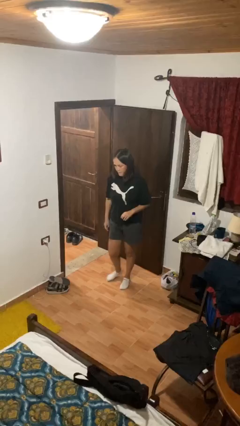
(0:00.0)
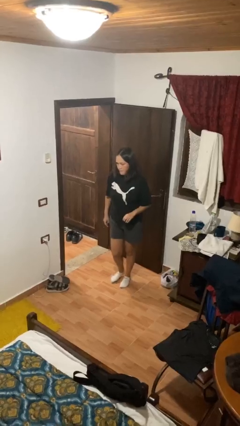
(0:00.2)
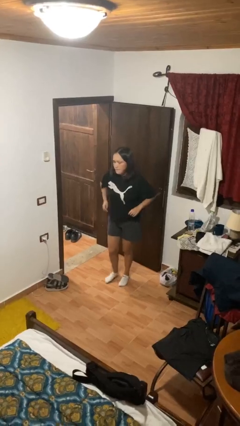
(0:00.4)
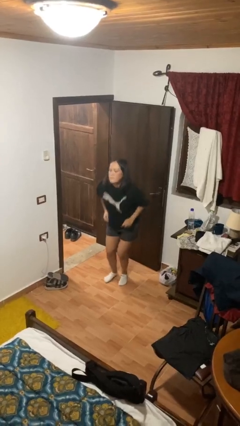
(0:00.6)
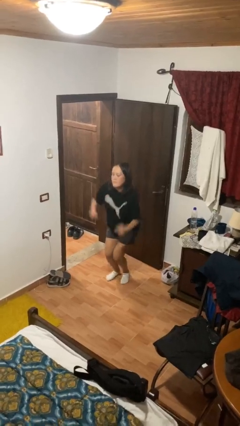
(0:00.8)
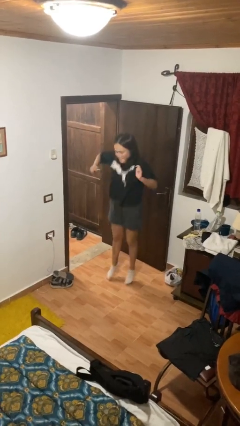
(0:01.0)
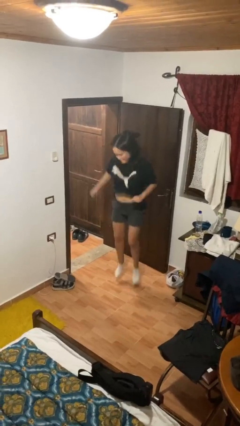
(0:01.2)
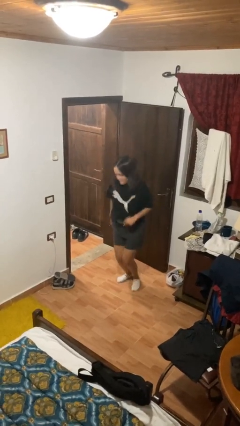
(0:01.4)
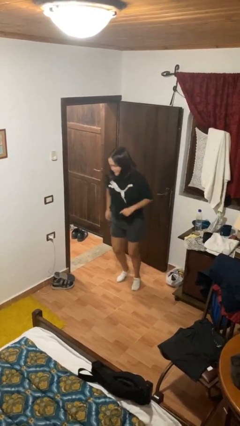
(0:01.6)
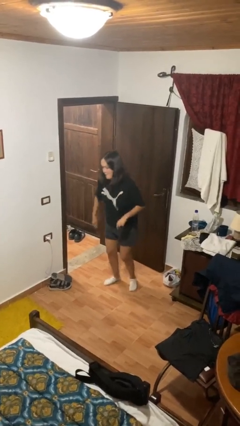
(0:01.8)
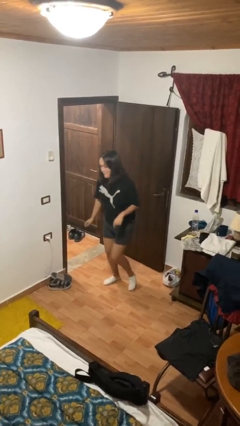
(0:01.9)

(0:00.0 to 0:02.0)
person jumps

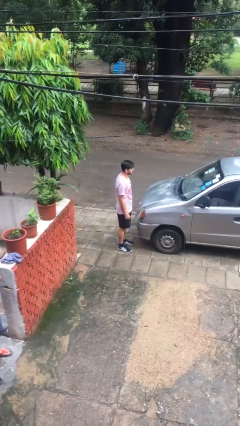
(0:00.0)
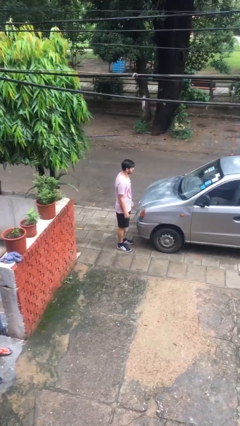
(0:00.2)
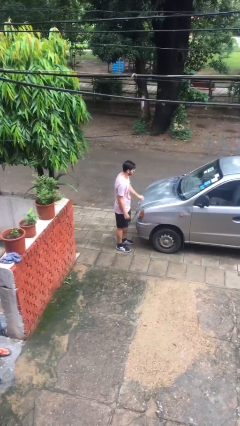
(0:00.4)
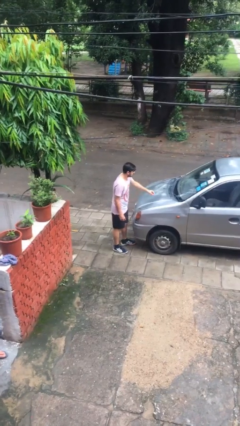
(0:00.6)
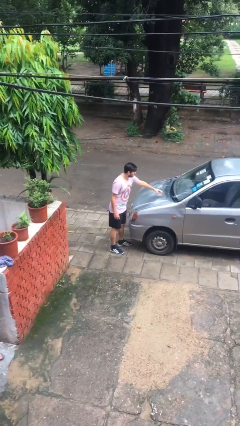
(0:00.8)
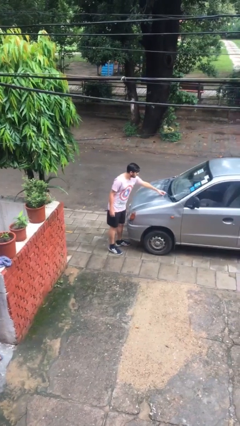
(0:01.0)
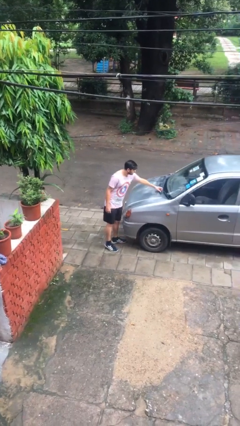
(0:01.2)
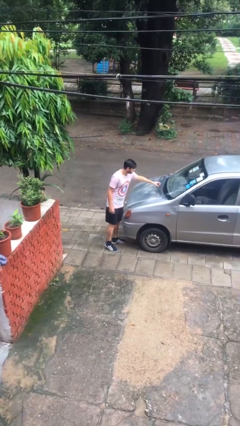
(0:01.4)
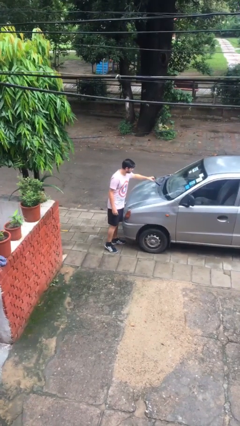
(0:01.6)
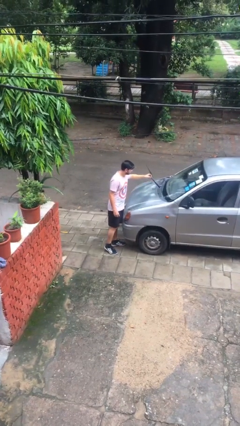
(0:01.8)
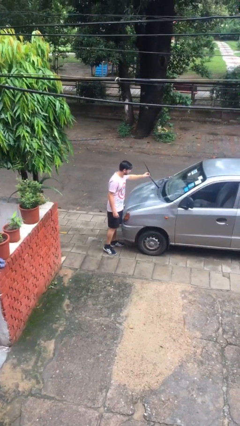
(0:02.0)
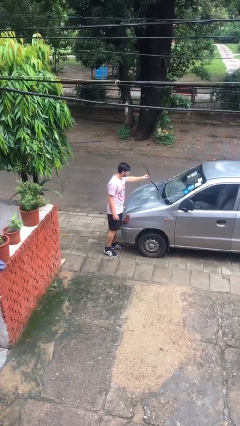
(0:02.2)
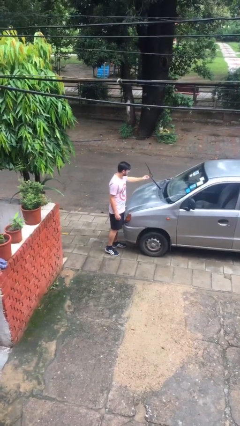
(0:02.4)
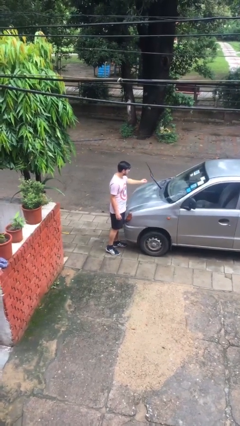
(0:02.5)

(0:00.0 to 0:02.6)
person flips up car wipers

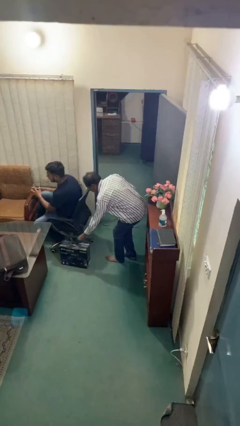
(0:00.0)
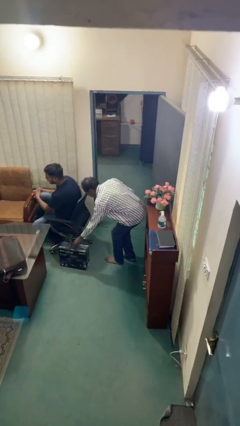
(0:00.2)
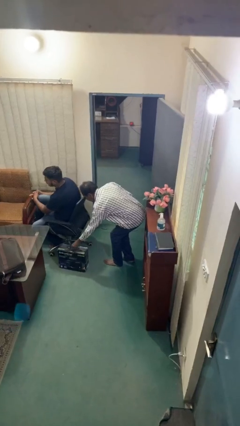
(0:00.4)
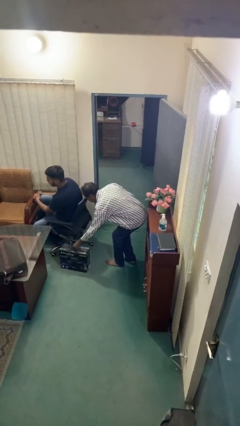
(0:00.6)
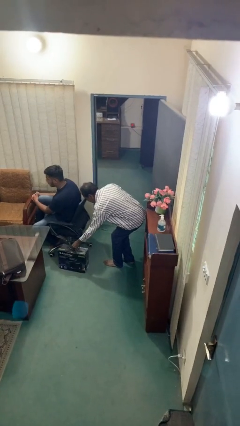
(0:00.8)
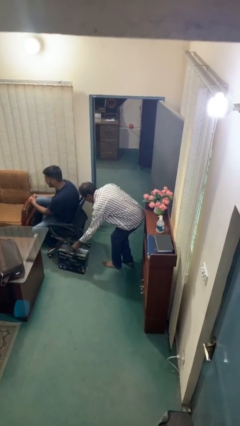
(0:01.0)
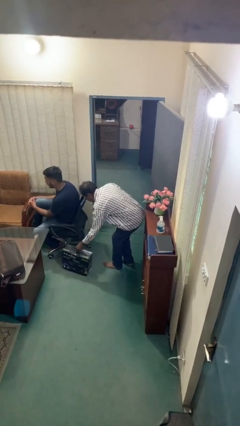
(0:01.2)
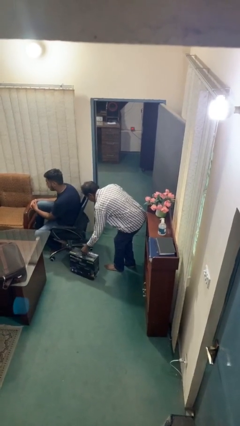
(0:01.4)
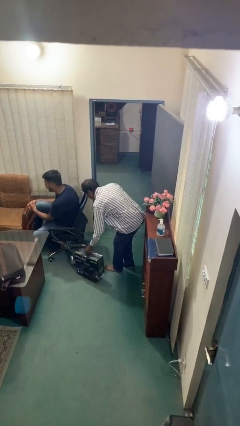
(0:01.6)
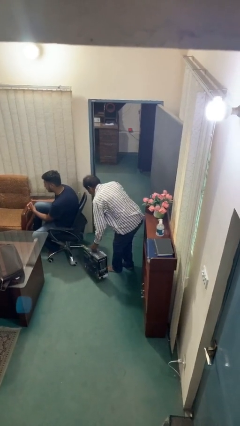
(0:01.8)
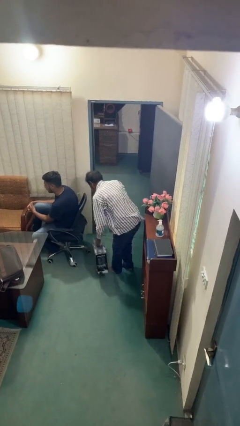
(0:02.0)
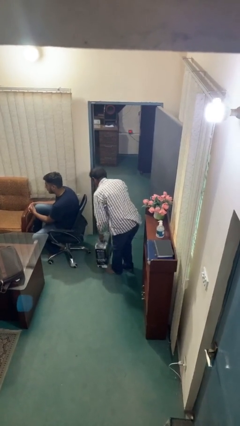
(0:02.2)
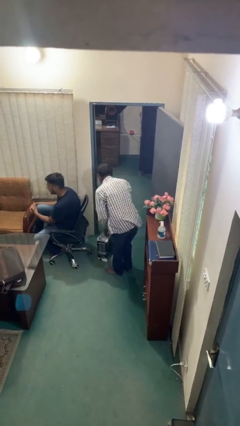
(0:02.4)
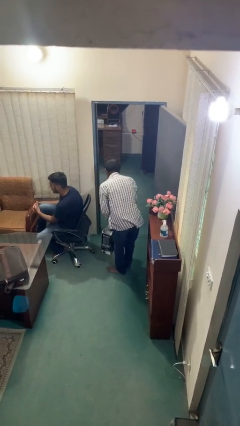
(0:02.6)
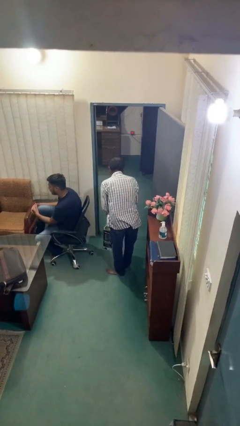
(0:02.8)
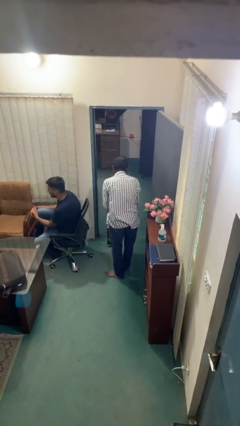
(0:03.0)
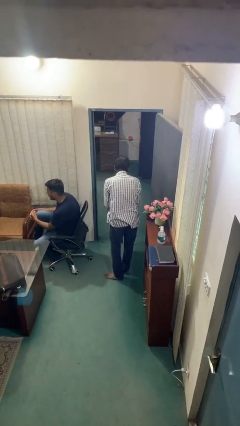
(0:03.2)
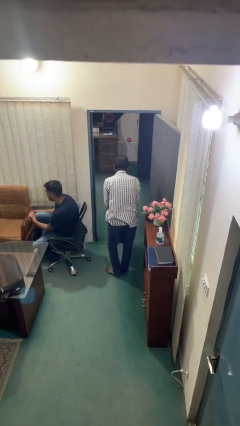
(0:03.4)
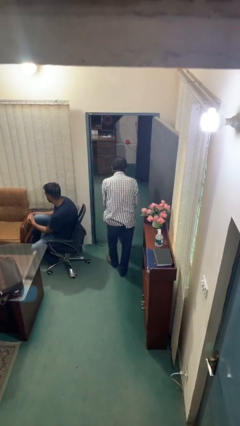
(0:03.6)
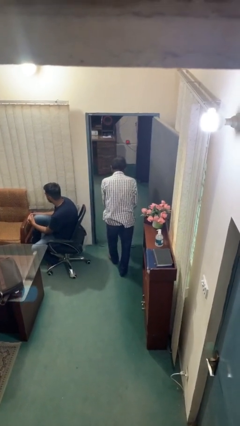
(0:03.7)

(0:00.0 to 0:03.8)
person steals object from person

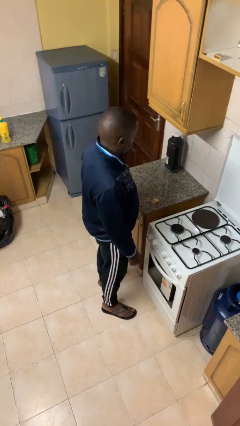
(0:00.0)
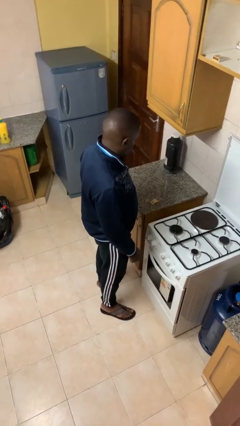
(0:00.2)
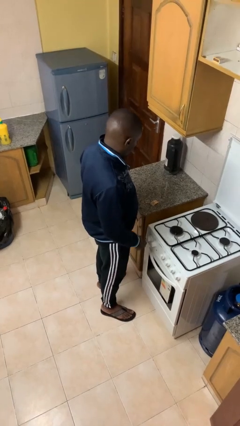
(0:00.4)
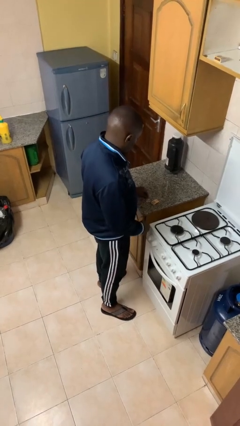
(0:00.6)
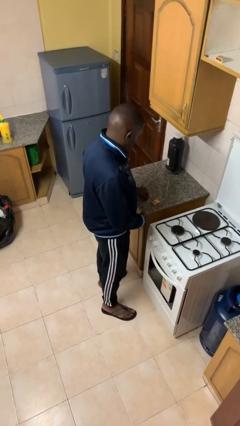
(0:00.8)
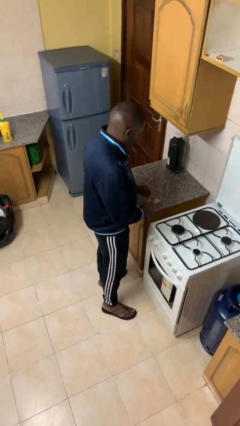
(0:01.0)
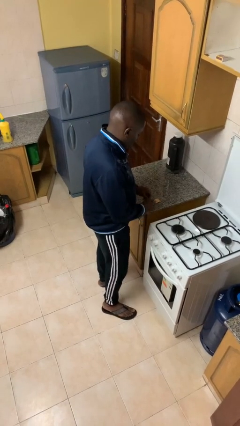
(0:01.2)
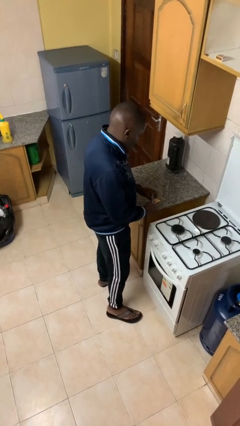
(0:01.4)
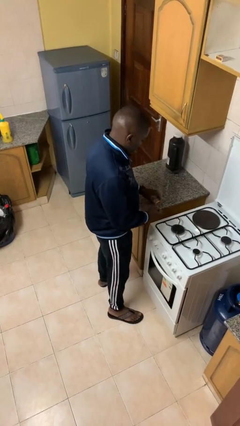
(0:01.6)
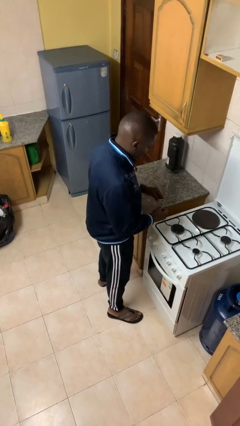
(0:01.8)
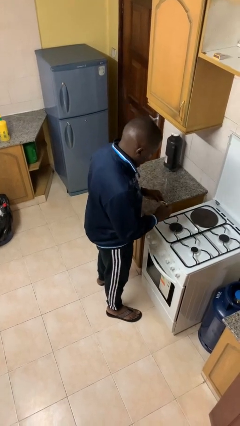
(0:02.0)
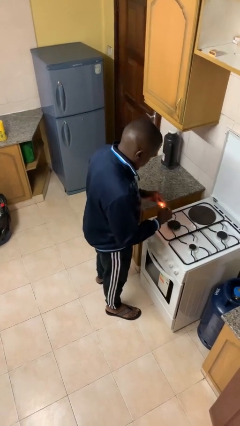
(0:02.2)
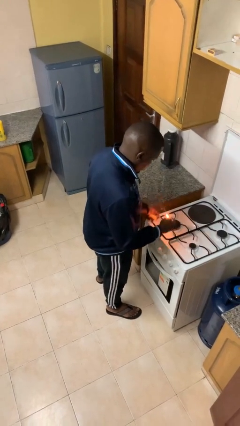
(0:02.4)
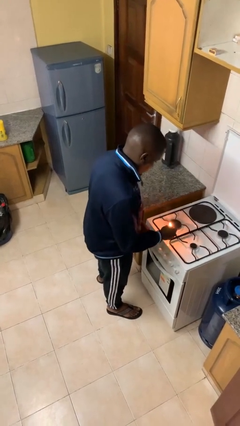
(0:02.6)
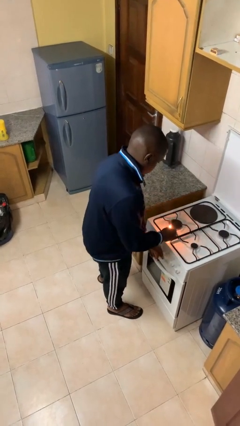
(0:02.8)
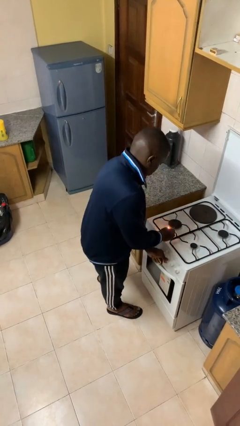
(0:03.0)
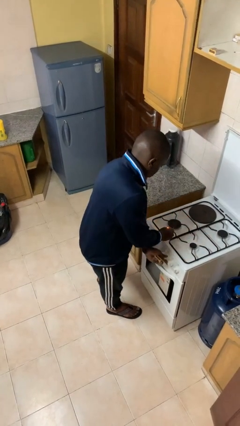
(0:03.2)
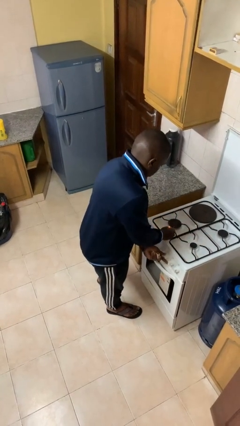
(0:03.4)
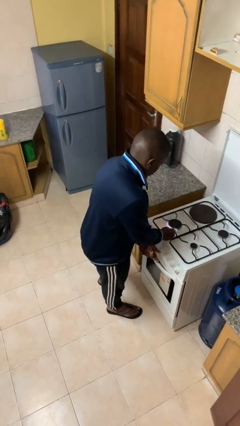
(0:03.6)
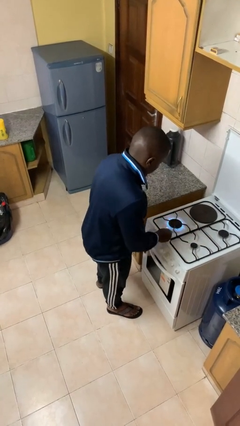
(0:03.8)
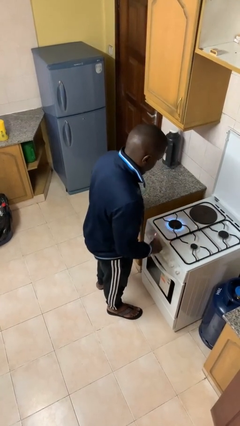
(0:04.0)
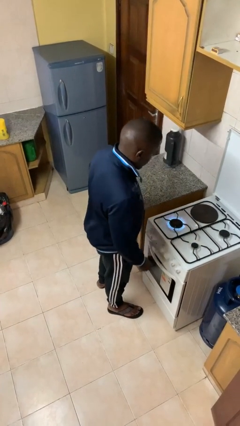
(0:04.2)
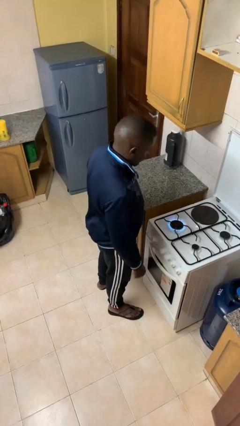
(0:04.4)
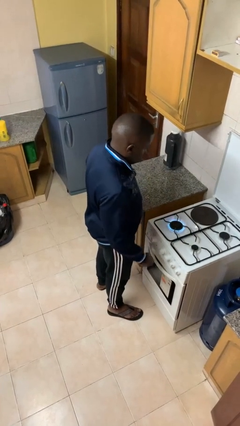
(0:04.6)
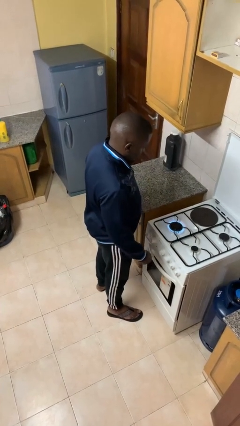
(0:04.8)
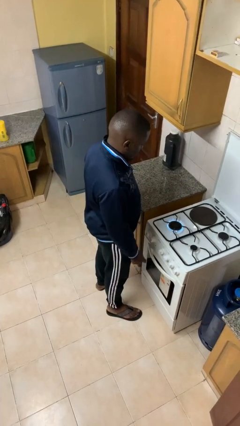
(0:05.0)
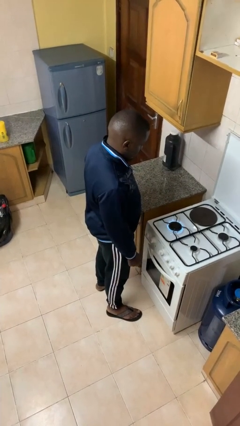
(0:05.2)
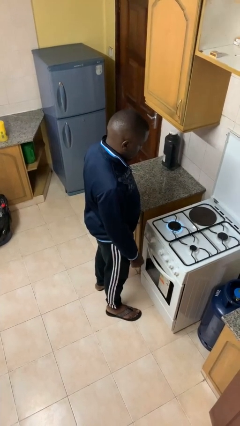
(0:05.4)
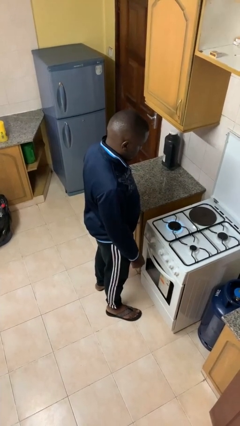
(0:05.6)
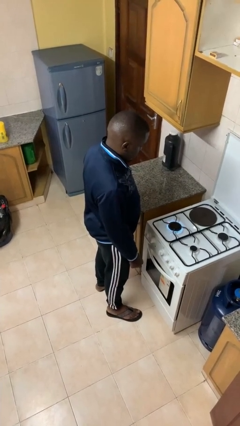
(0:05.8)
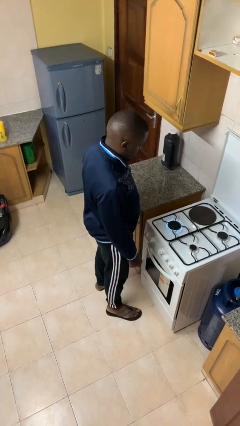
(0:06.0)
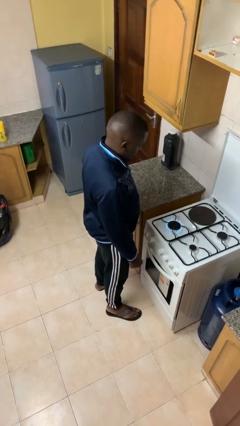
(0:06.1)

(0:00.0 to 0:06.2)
person turns on stovetop

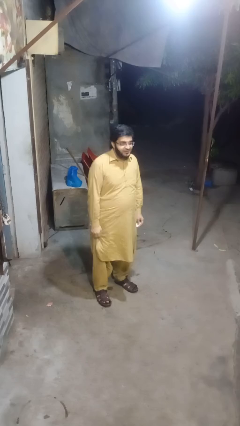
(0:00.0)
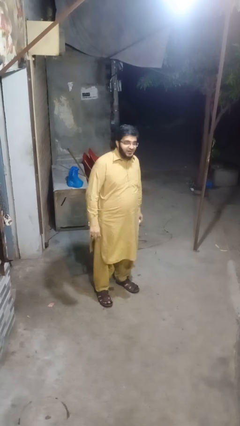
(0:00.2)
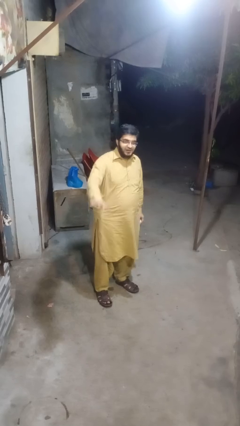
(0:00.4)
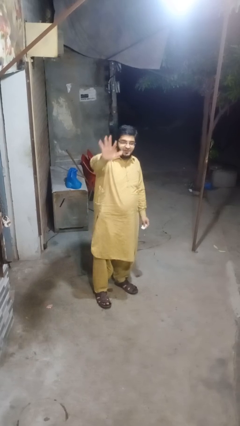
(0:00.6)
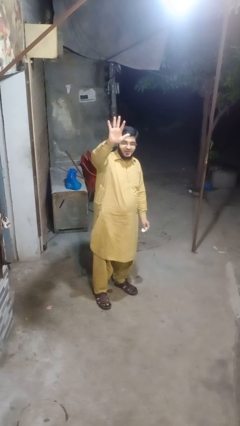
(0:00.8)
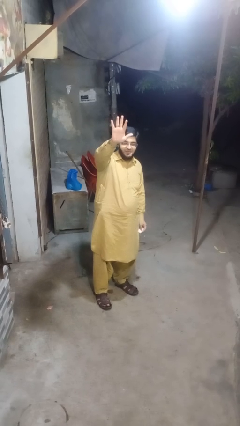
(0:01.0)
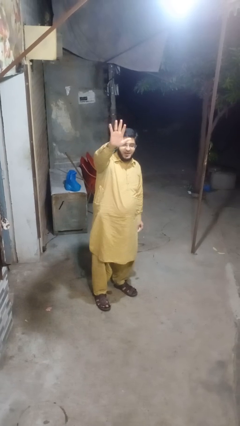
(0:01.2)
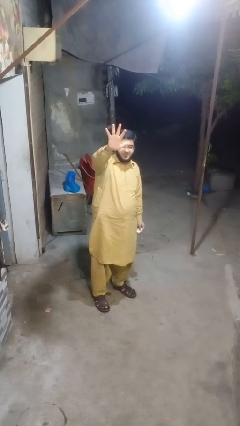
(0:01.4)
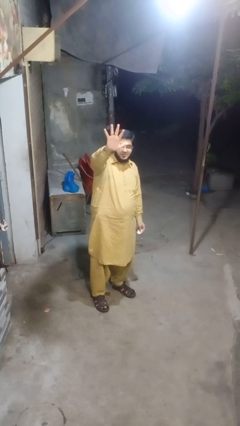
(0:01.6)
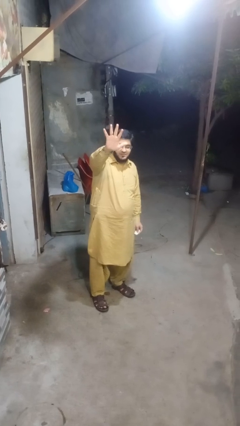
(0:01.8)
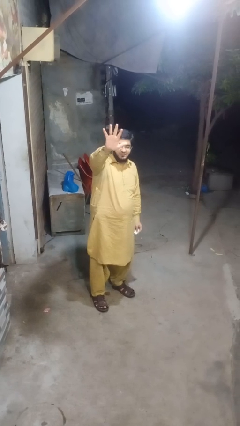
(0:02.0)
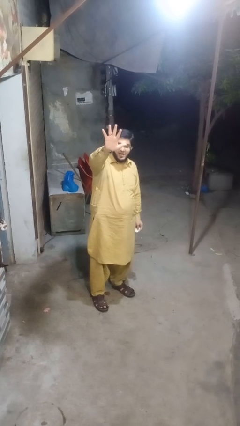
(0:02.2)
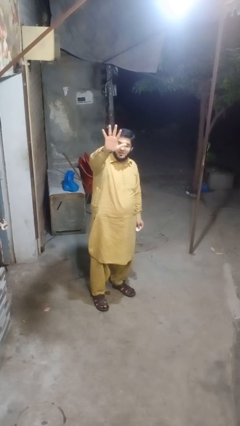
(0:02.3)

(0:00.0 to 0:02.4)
person gestures number five

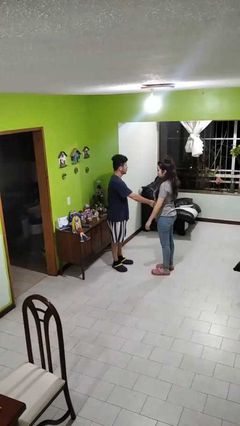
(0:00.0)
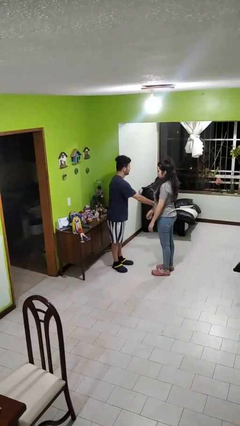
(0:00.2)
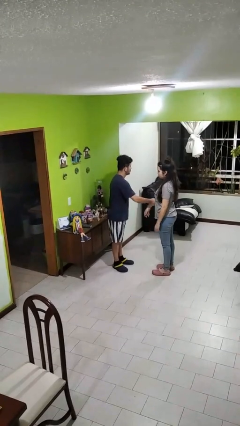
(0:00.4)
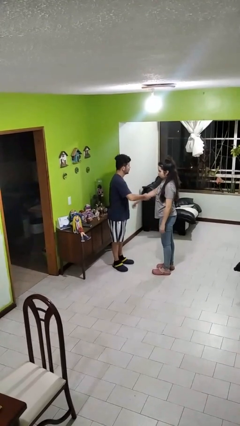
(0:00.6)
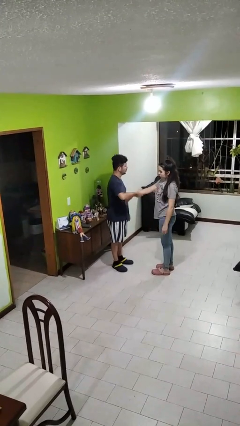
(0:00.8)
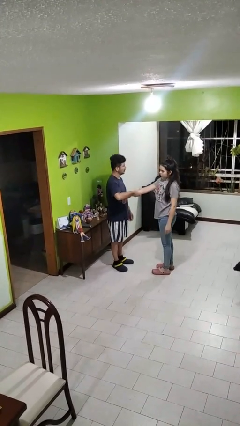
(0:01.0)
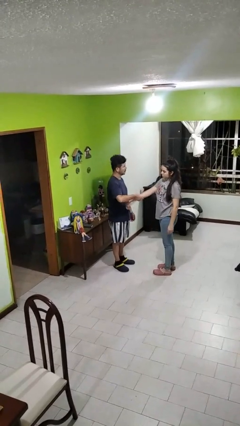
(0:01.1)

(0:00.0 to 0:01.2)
person grabs person by forearm
